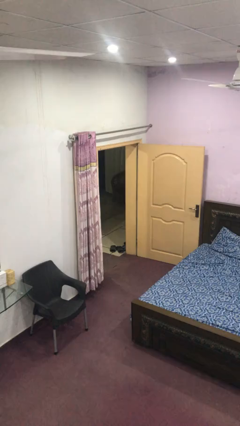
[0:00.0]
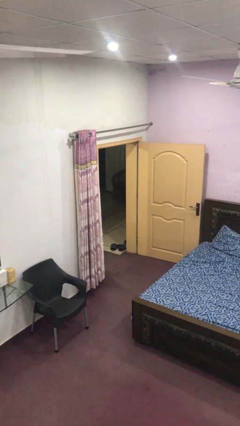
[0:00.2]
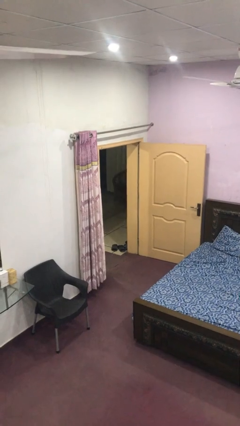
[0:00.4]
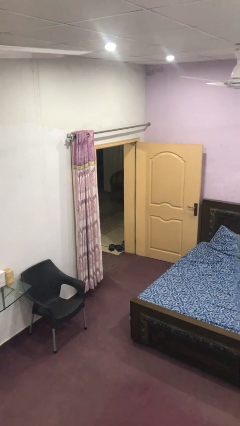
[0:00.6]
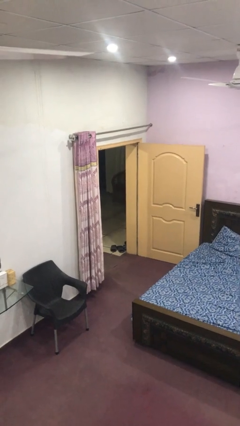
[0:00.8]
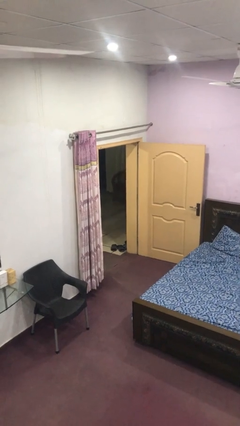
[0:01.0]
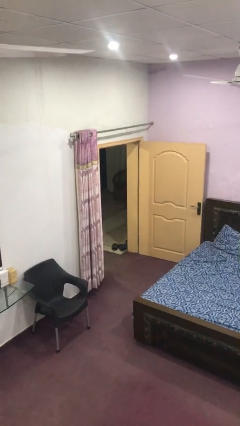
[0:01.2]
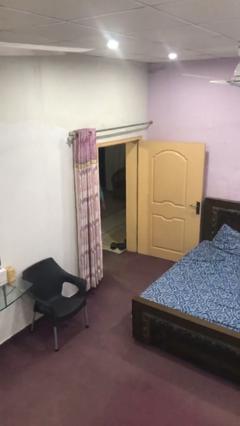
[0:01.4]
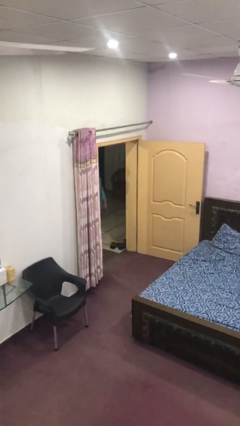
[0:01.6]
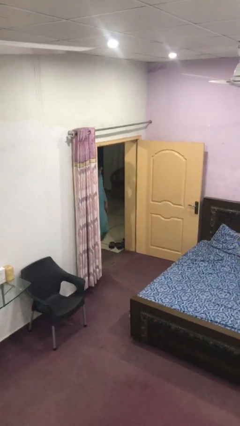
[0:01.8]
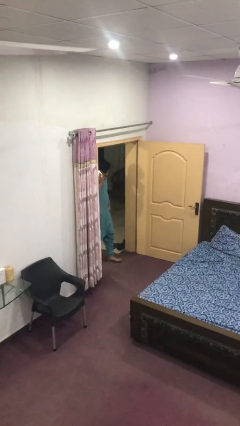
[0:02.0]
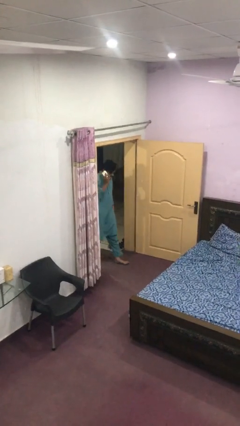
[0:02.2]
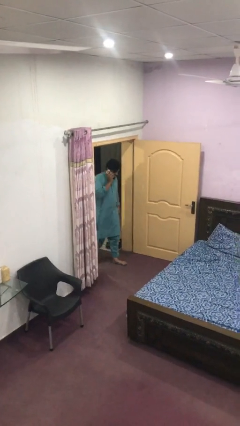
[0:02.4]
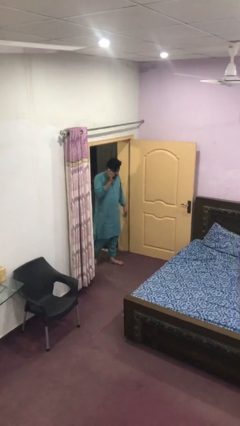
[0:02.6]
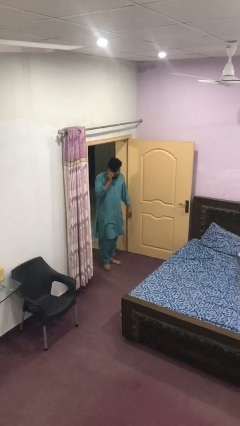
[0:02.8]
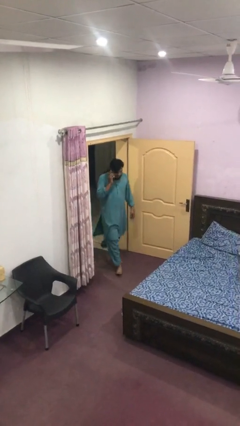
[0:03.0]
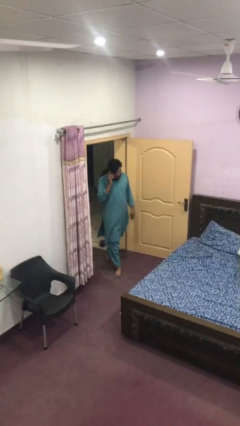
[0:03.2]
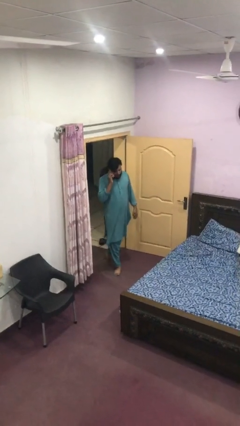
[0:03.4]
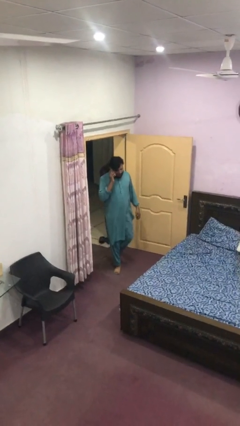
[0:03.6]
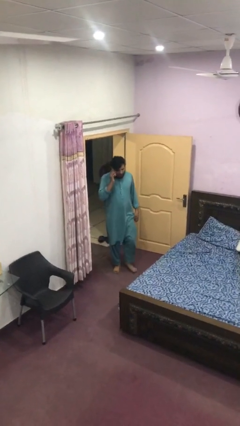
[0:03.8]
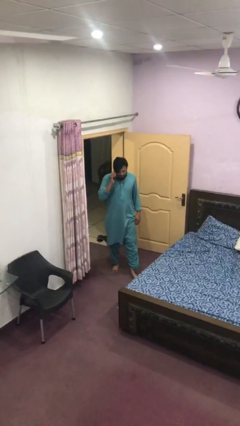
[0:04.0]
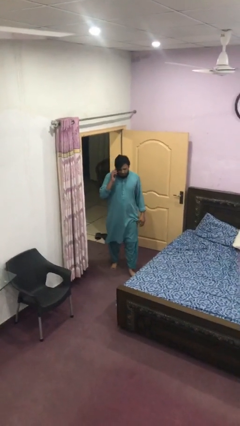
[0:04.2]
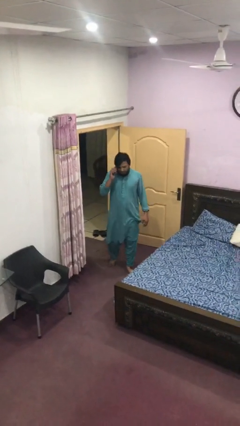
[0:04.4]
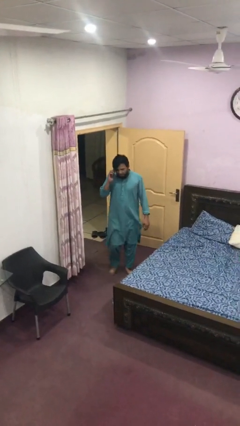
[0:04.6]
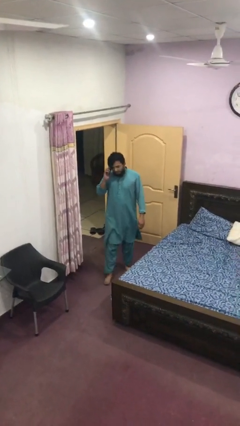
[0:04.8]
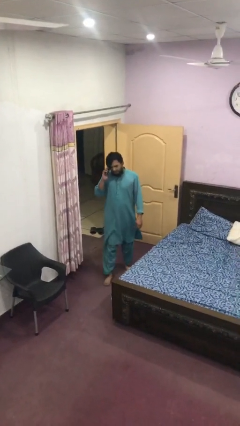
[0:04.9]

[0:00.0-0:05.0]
person enters scene through structure

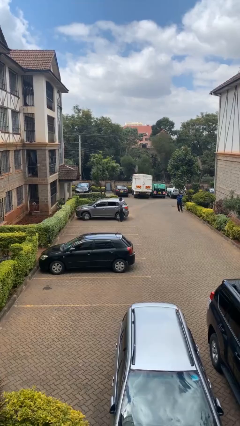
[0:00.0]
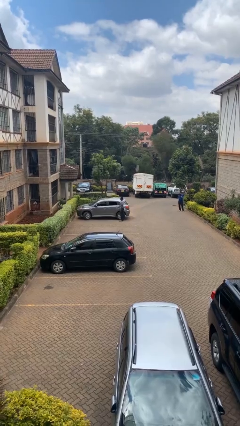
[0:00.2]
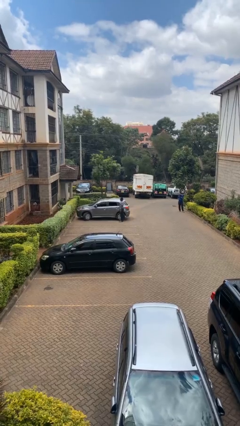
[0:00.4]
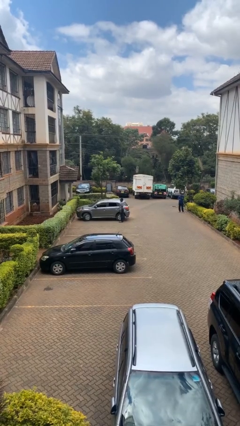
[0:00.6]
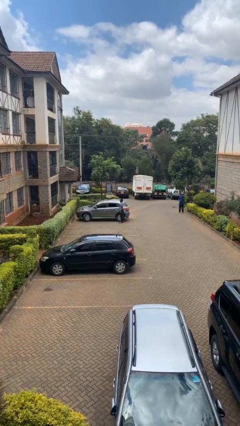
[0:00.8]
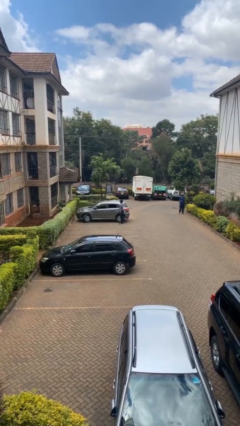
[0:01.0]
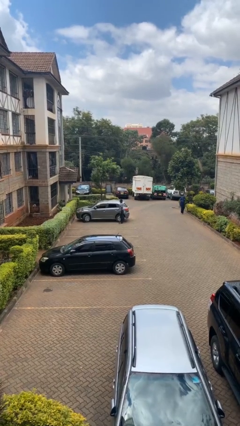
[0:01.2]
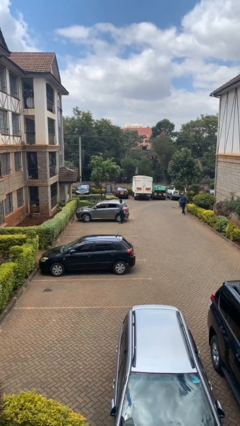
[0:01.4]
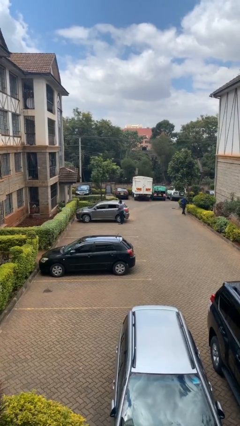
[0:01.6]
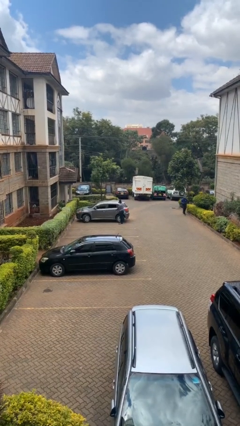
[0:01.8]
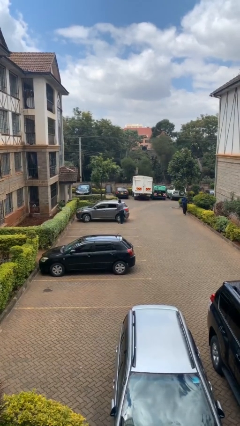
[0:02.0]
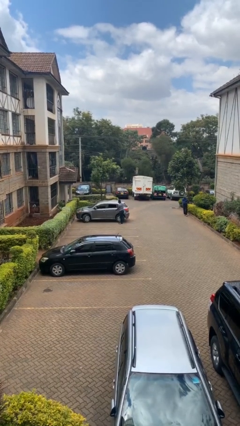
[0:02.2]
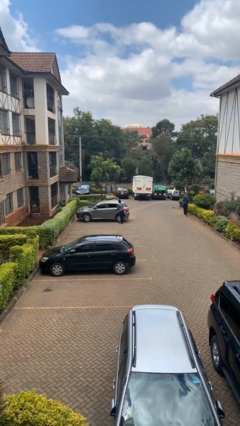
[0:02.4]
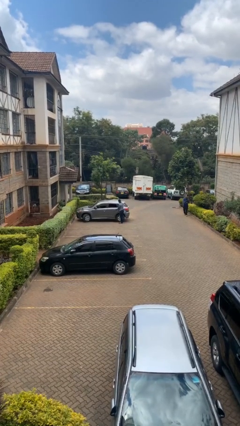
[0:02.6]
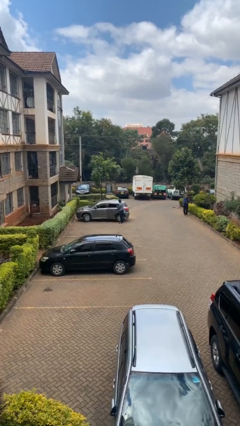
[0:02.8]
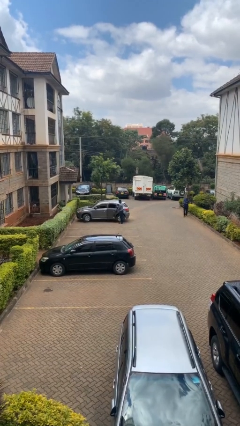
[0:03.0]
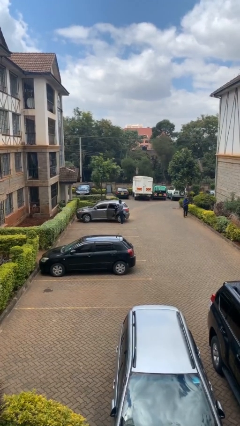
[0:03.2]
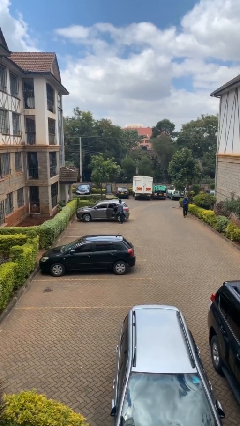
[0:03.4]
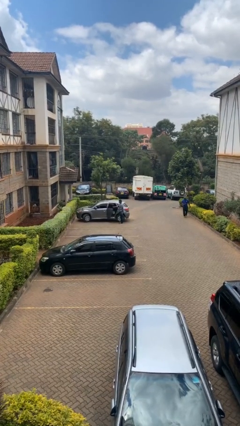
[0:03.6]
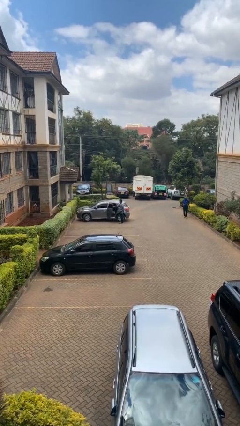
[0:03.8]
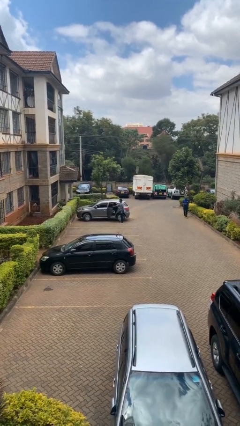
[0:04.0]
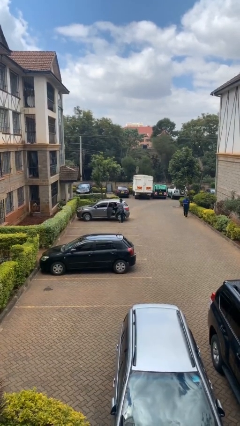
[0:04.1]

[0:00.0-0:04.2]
person opens car door

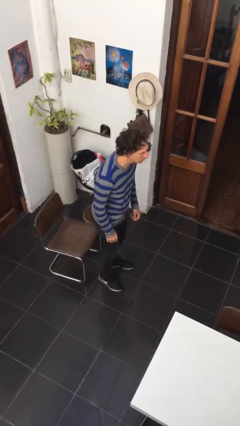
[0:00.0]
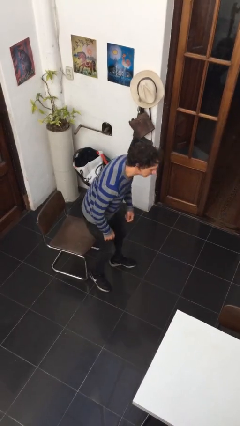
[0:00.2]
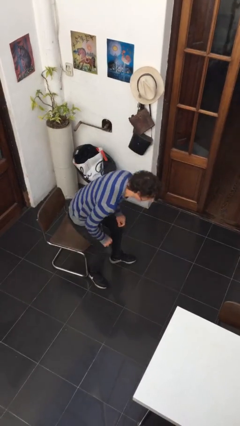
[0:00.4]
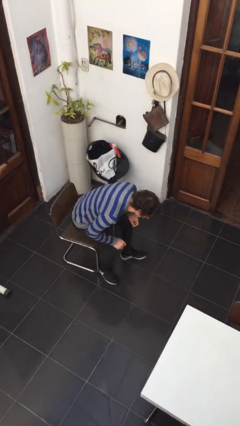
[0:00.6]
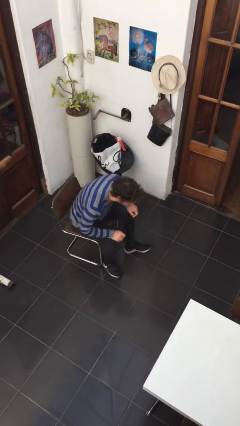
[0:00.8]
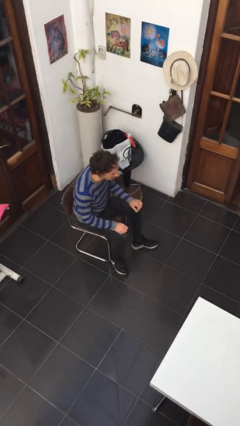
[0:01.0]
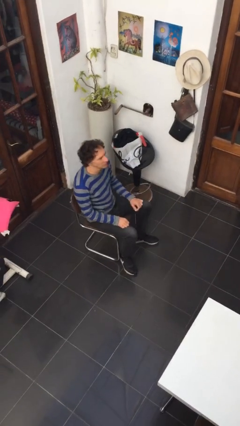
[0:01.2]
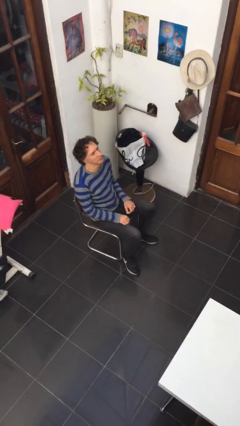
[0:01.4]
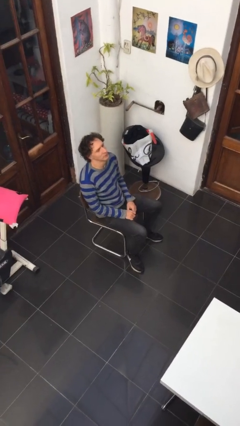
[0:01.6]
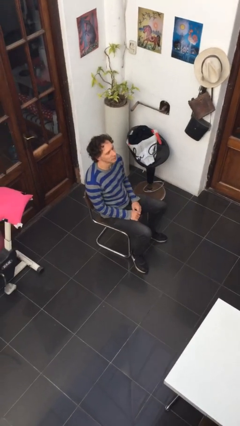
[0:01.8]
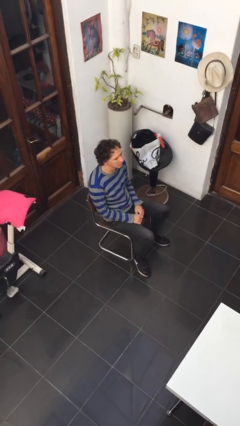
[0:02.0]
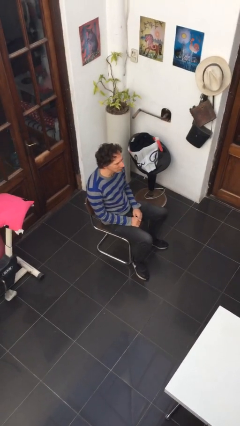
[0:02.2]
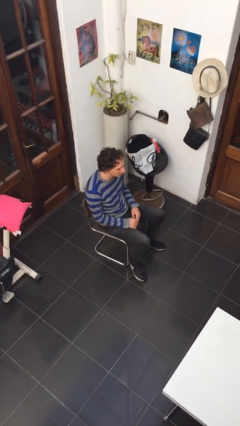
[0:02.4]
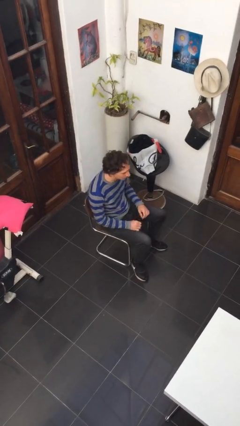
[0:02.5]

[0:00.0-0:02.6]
person sits down

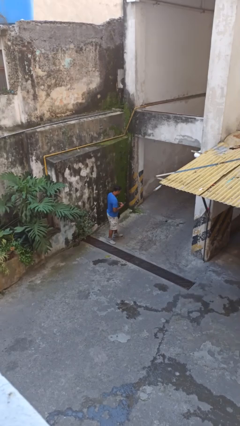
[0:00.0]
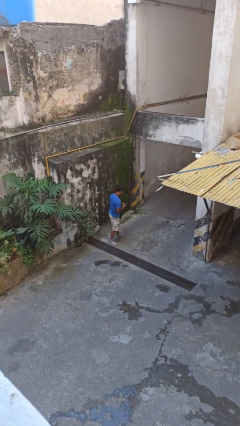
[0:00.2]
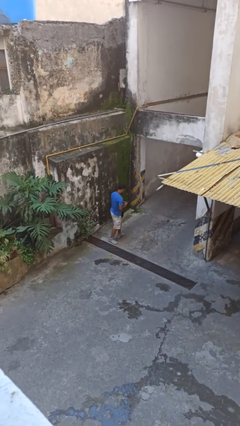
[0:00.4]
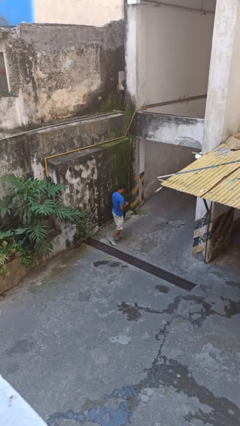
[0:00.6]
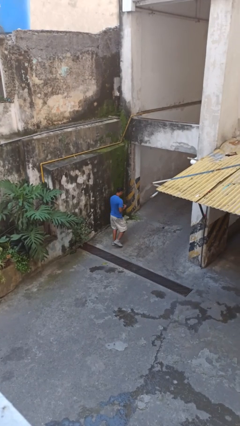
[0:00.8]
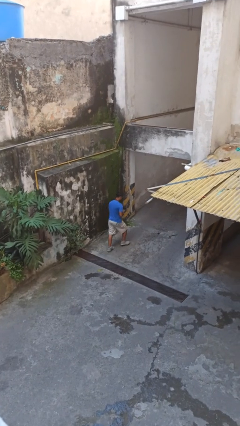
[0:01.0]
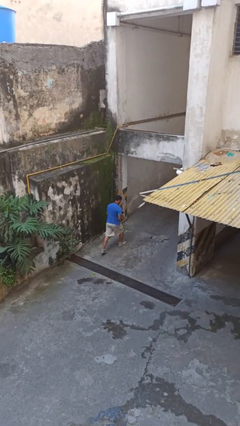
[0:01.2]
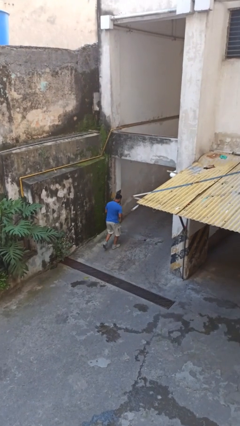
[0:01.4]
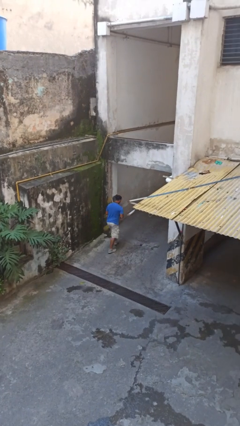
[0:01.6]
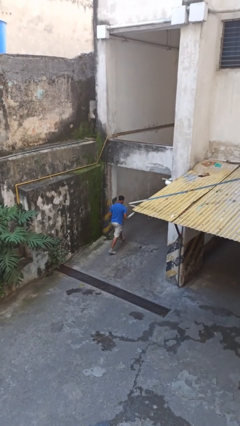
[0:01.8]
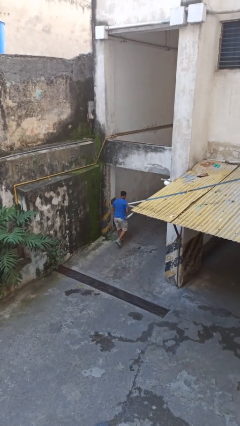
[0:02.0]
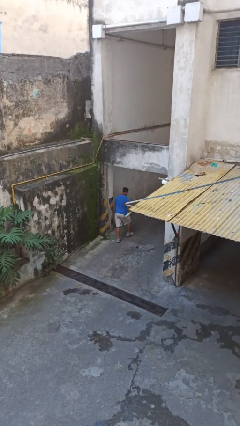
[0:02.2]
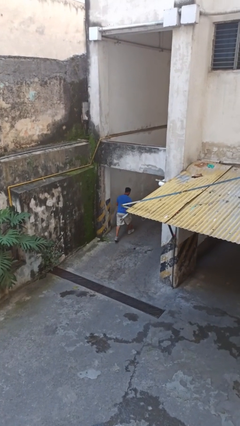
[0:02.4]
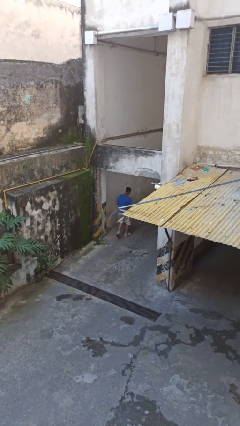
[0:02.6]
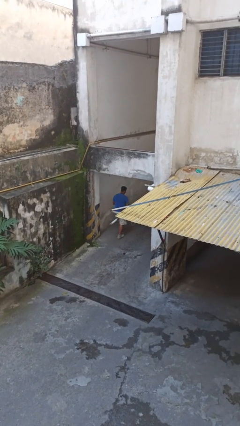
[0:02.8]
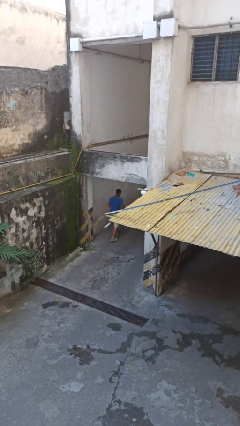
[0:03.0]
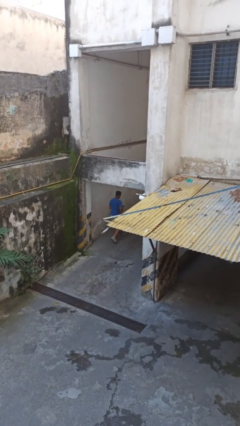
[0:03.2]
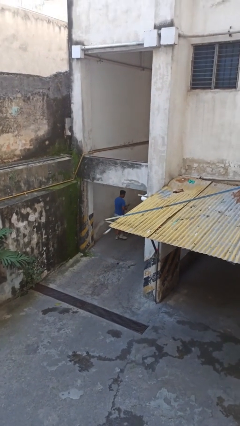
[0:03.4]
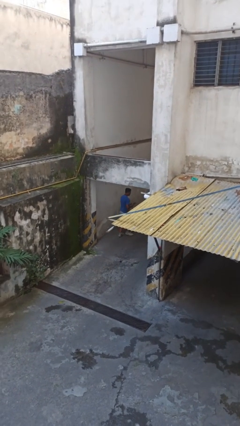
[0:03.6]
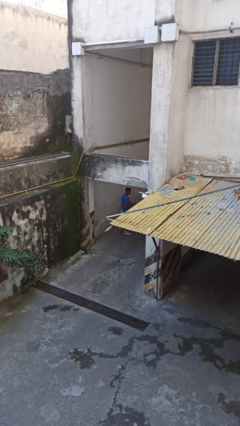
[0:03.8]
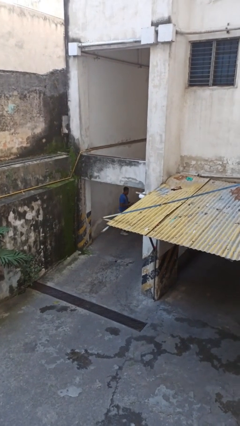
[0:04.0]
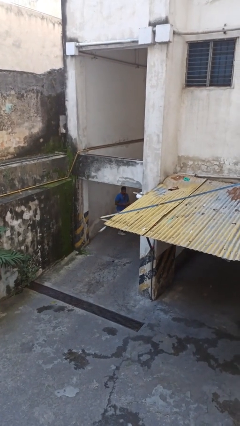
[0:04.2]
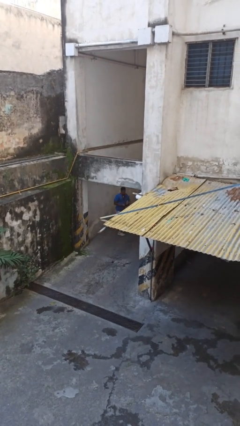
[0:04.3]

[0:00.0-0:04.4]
person exits scene through structure

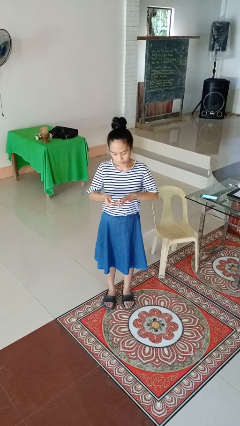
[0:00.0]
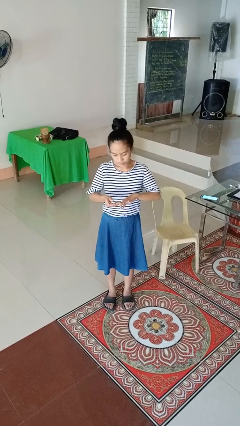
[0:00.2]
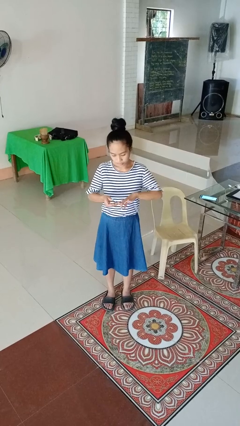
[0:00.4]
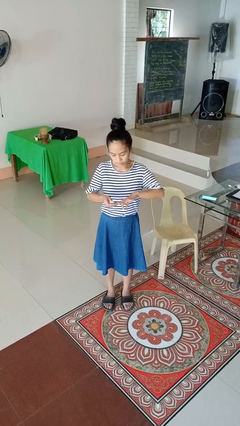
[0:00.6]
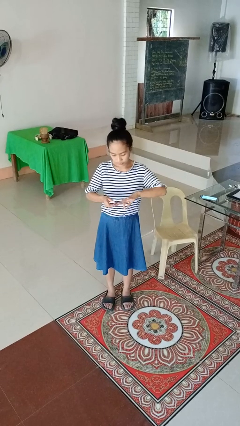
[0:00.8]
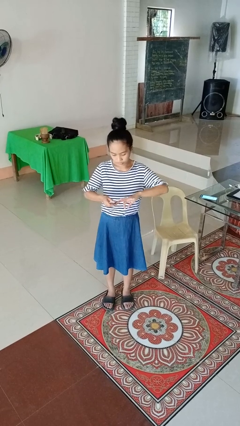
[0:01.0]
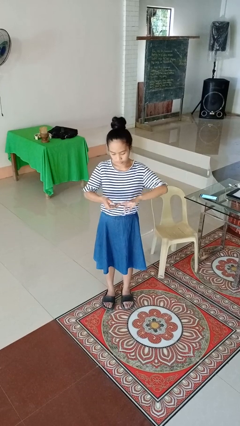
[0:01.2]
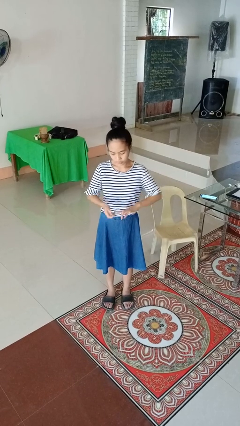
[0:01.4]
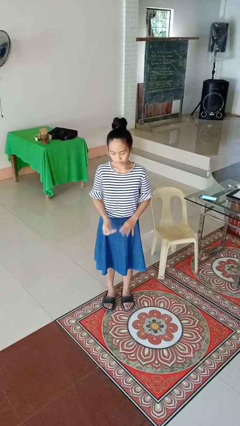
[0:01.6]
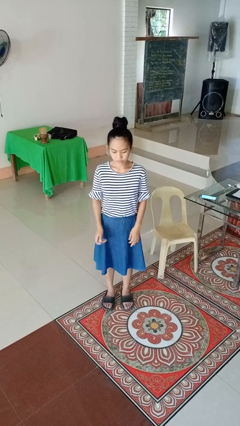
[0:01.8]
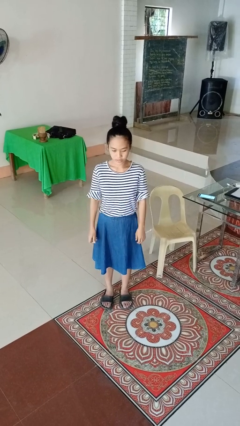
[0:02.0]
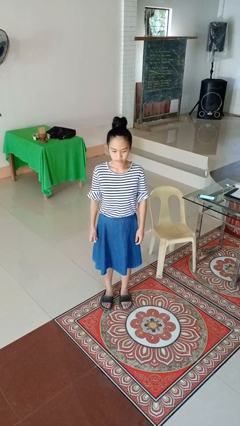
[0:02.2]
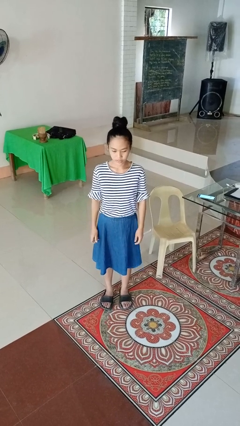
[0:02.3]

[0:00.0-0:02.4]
person clips fingernails
